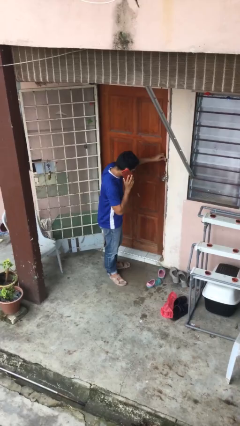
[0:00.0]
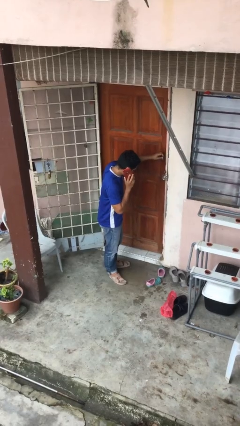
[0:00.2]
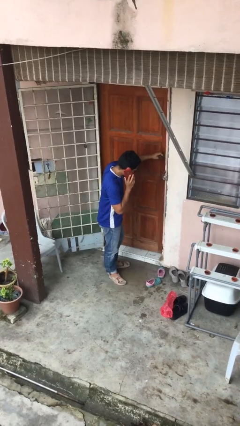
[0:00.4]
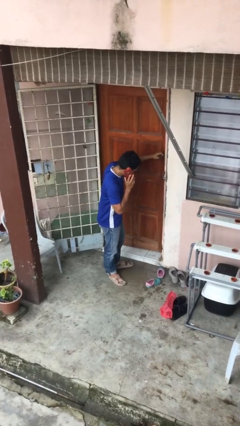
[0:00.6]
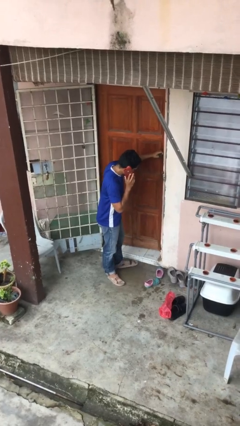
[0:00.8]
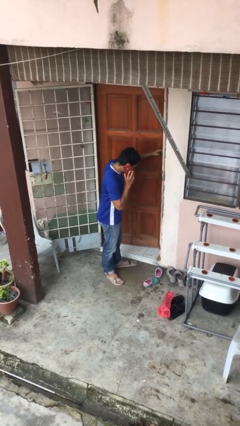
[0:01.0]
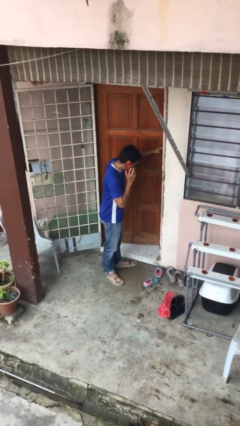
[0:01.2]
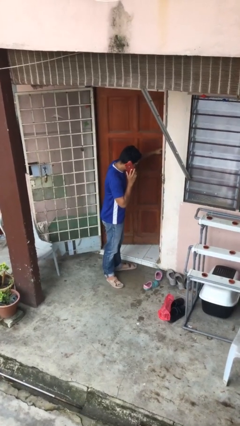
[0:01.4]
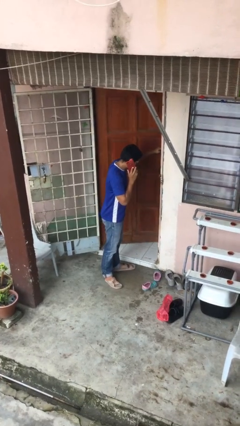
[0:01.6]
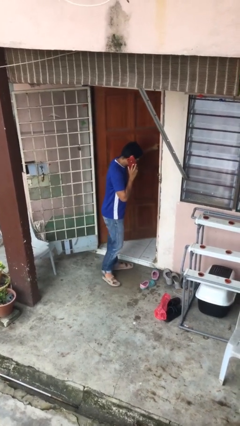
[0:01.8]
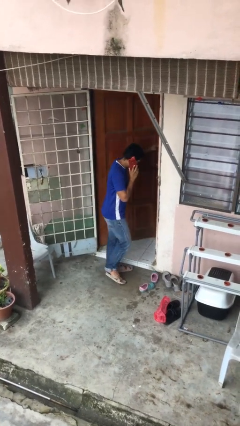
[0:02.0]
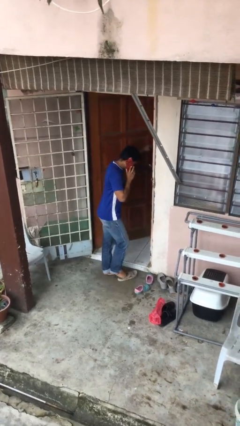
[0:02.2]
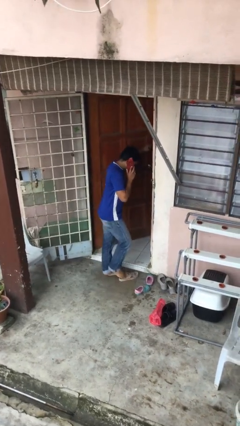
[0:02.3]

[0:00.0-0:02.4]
person opens facility door

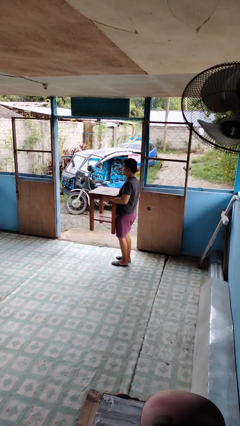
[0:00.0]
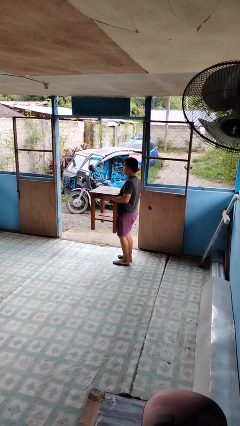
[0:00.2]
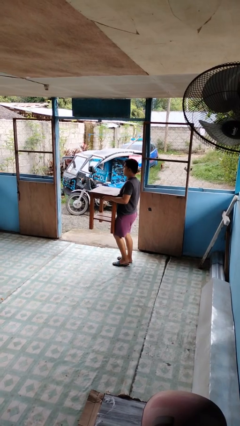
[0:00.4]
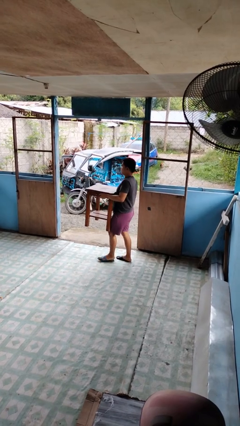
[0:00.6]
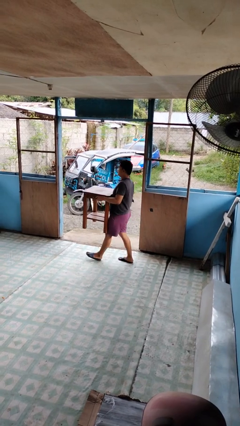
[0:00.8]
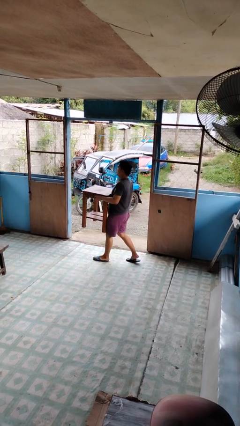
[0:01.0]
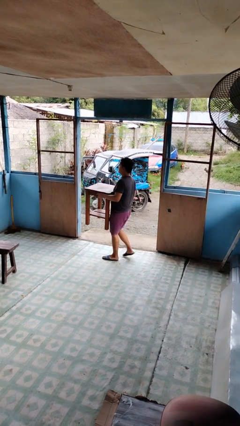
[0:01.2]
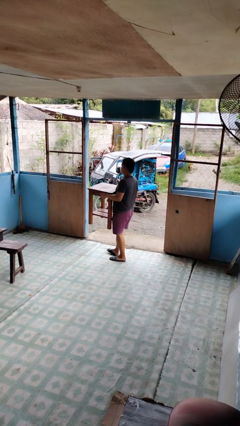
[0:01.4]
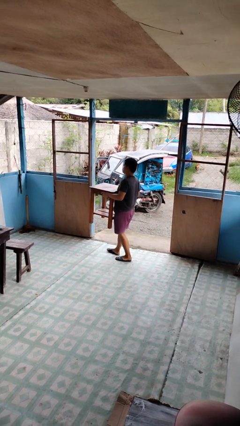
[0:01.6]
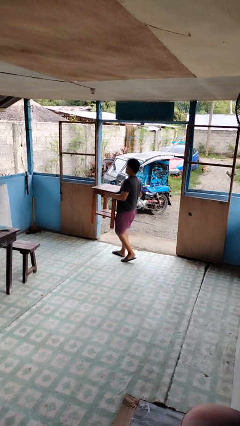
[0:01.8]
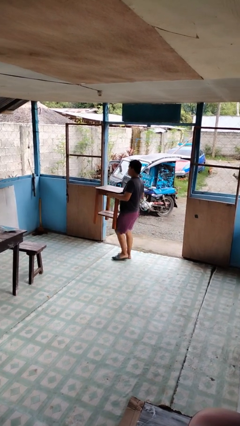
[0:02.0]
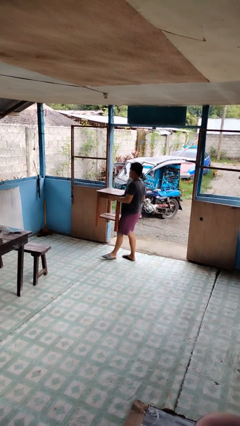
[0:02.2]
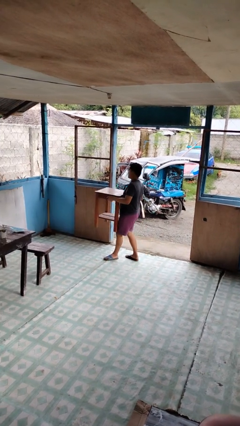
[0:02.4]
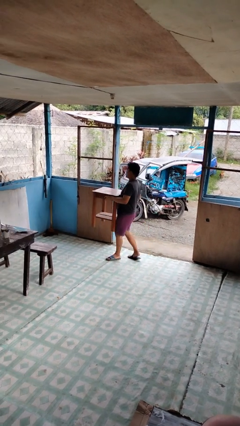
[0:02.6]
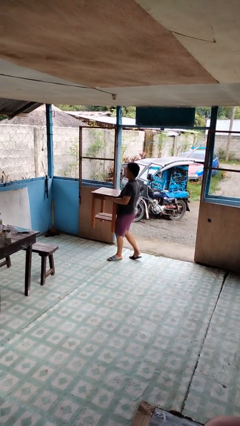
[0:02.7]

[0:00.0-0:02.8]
person carries furniture

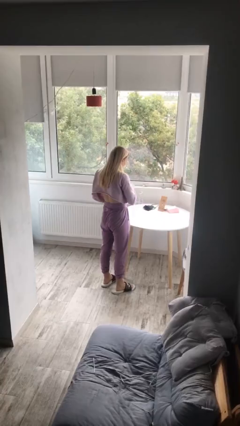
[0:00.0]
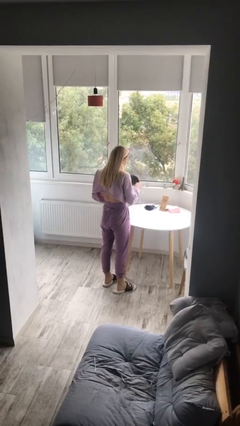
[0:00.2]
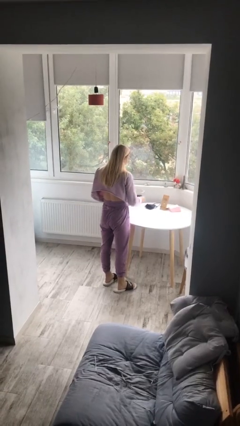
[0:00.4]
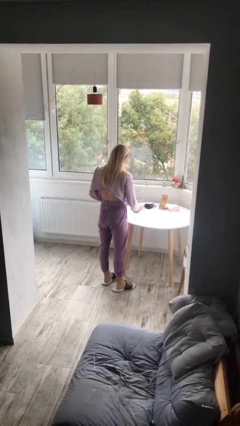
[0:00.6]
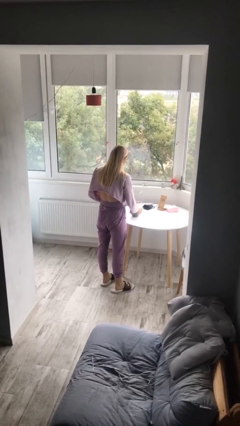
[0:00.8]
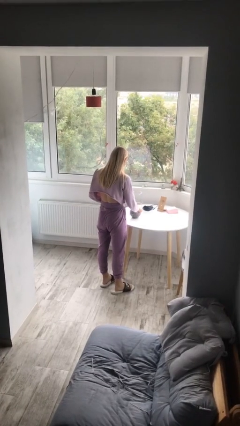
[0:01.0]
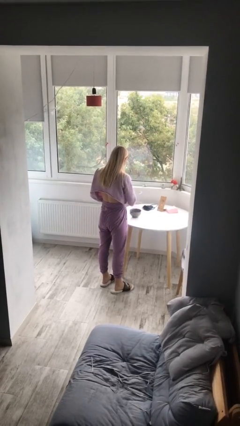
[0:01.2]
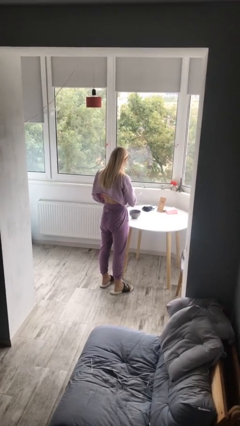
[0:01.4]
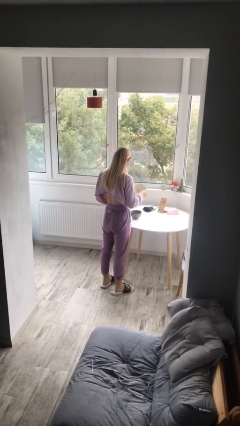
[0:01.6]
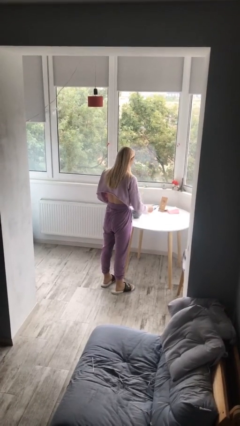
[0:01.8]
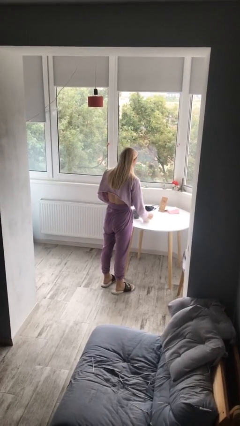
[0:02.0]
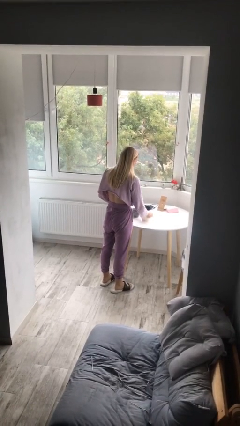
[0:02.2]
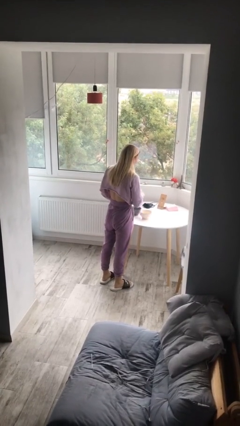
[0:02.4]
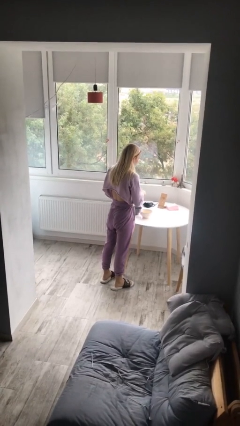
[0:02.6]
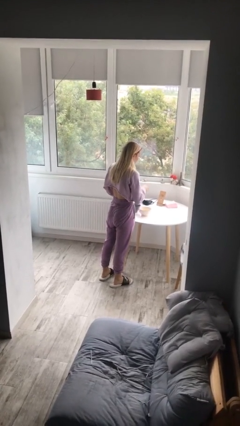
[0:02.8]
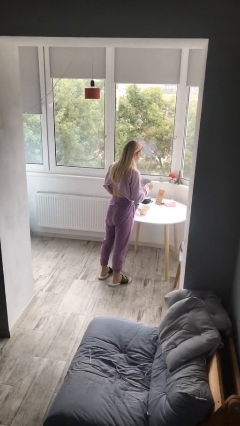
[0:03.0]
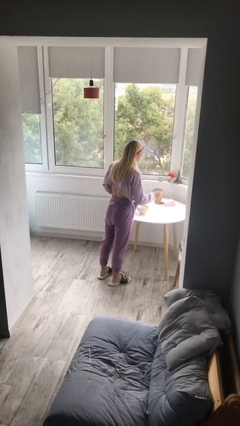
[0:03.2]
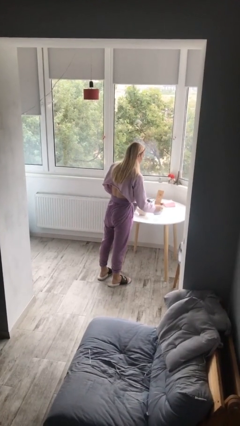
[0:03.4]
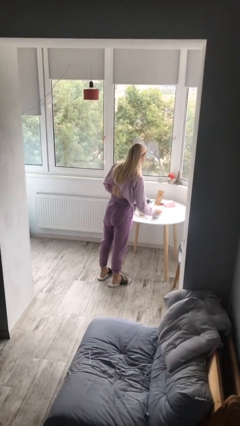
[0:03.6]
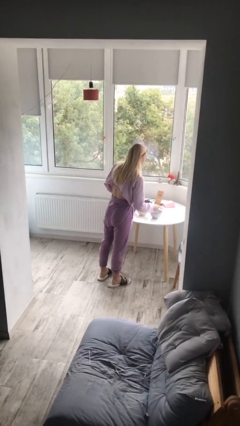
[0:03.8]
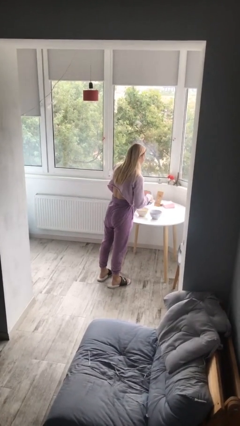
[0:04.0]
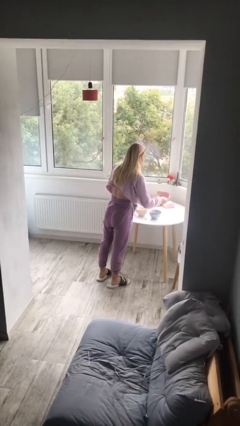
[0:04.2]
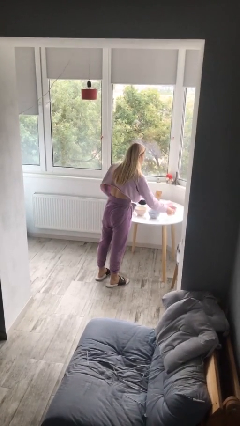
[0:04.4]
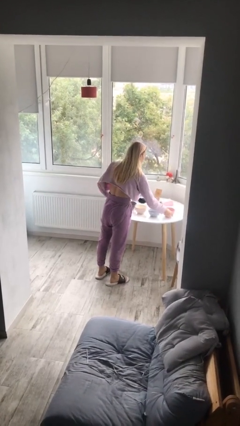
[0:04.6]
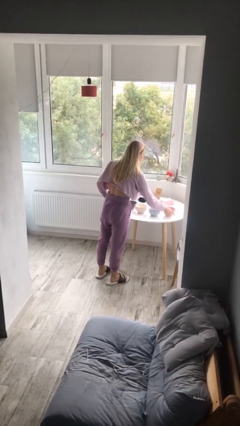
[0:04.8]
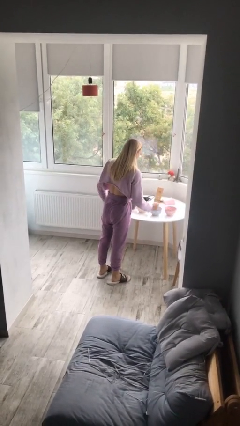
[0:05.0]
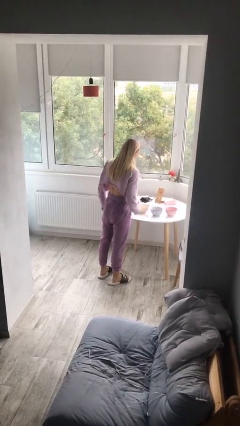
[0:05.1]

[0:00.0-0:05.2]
person sets table

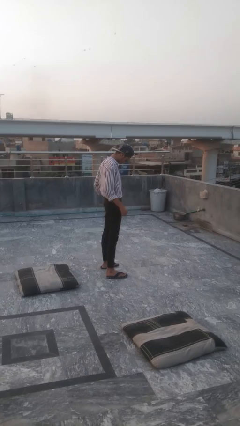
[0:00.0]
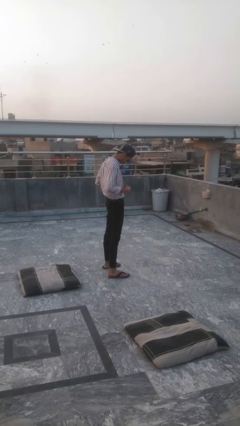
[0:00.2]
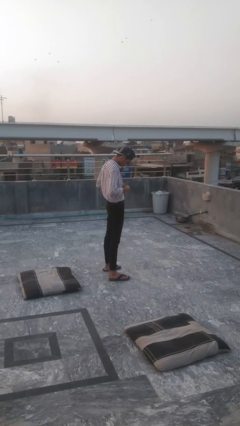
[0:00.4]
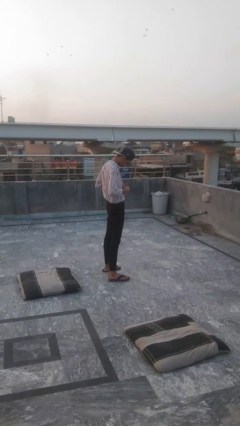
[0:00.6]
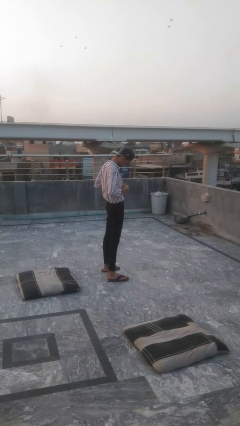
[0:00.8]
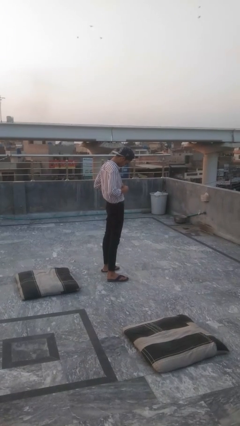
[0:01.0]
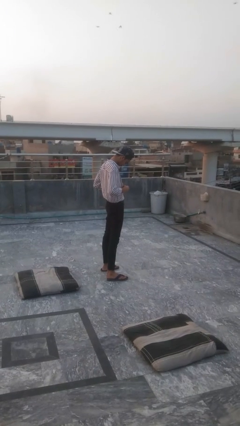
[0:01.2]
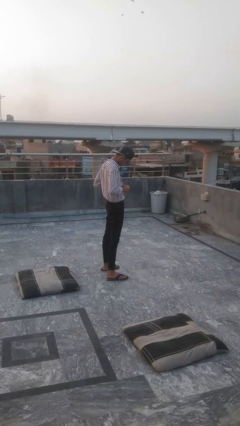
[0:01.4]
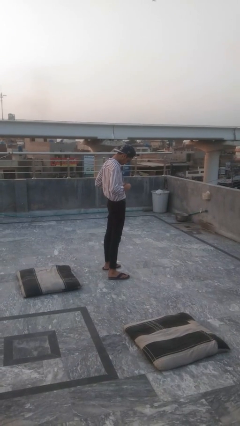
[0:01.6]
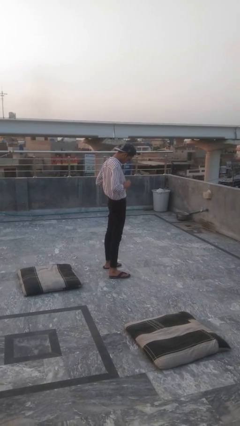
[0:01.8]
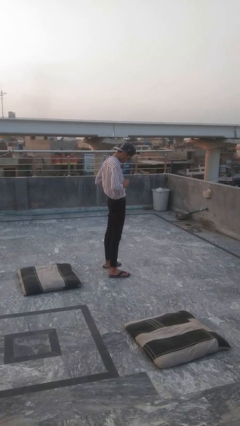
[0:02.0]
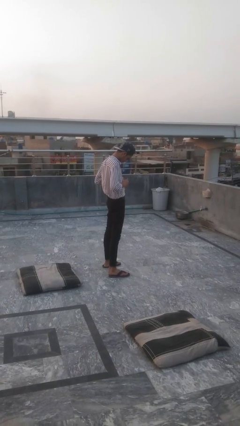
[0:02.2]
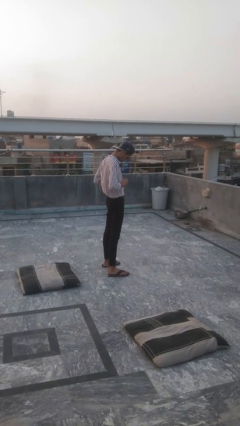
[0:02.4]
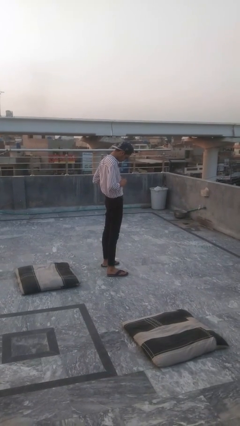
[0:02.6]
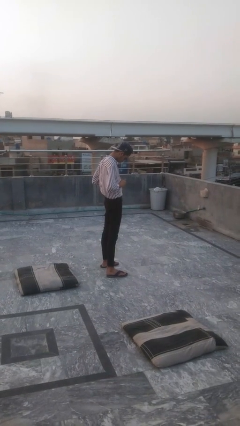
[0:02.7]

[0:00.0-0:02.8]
person buttons shirt

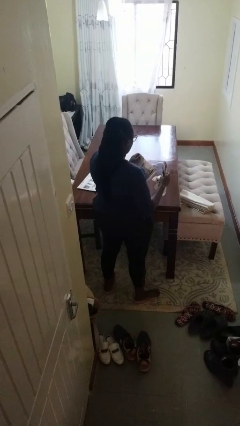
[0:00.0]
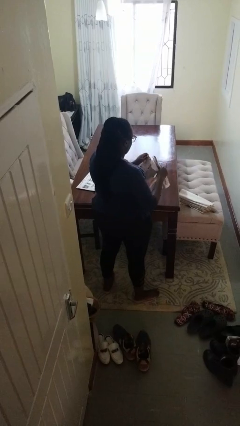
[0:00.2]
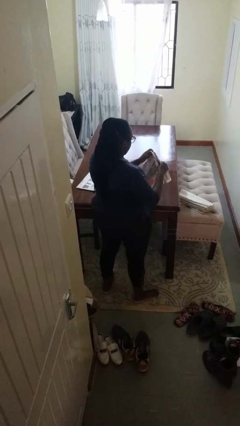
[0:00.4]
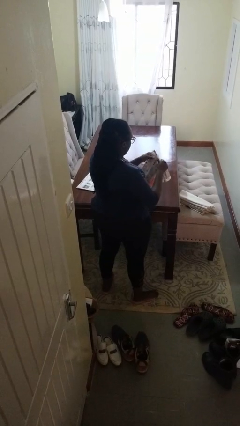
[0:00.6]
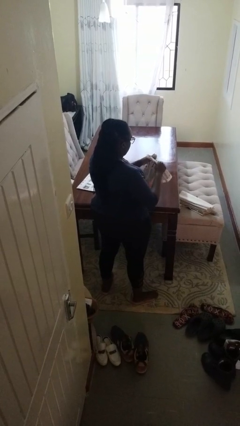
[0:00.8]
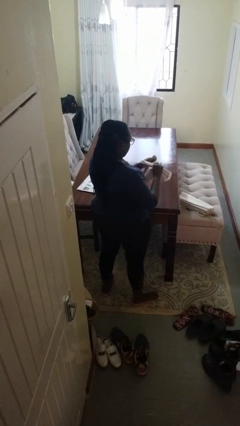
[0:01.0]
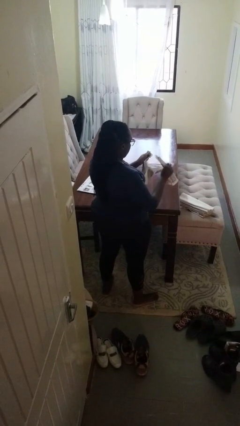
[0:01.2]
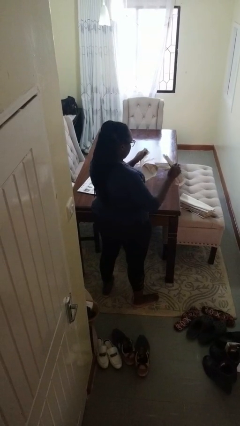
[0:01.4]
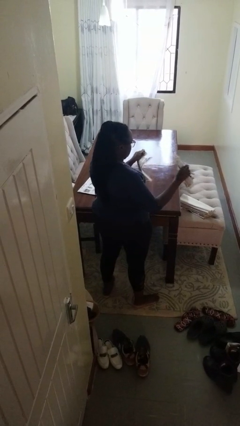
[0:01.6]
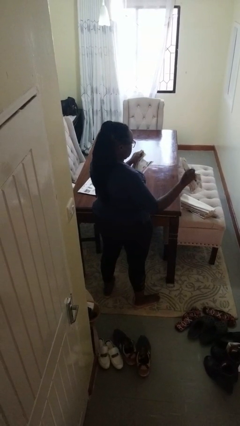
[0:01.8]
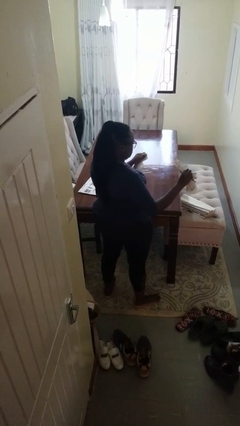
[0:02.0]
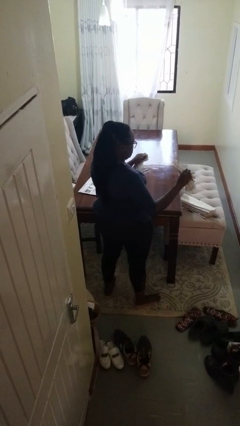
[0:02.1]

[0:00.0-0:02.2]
person tears paper

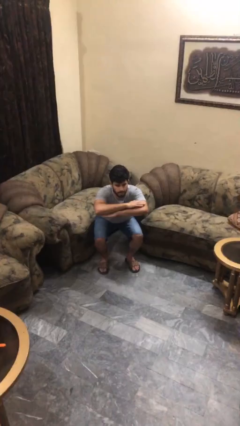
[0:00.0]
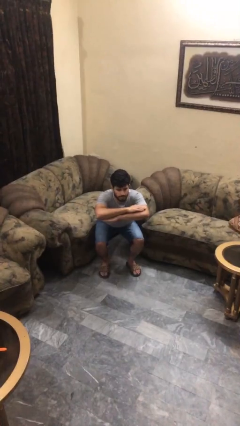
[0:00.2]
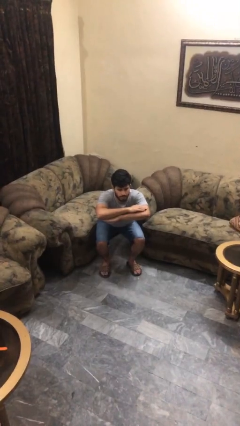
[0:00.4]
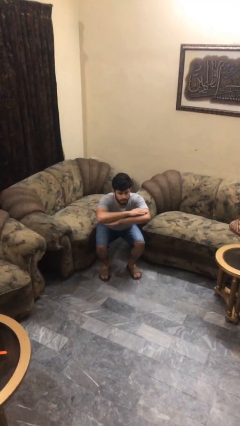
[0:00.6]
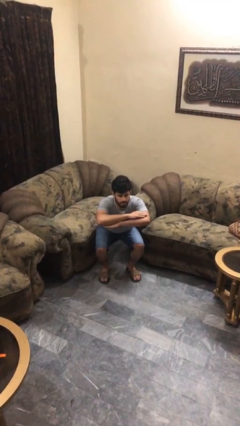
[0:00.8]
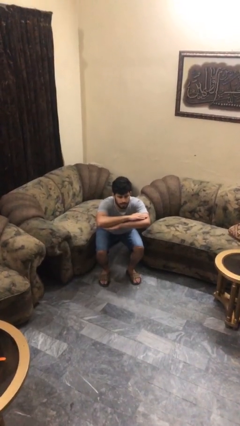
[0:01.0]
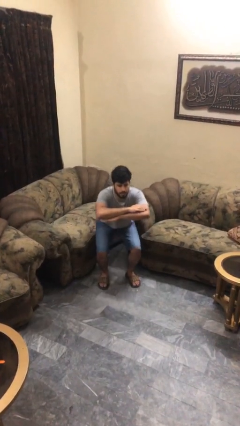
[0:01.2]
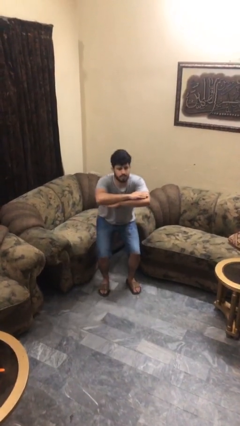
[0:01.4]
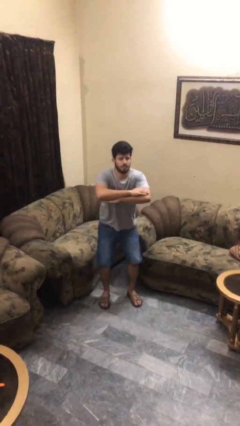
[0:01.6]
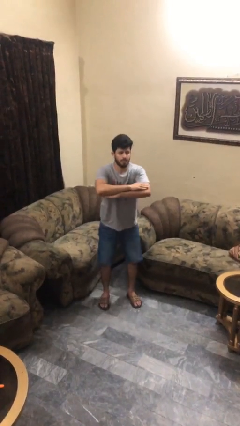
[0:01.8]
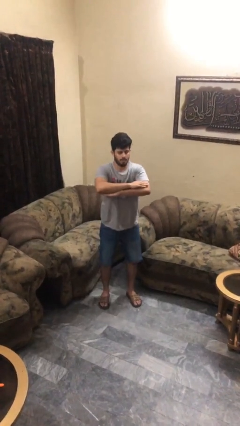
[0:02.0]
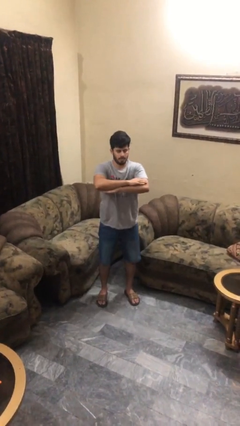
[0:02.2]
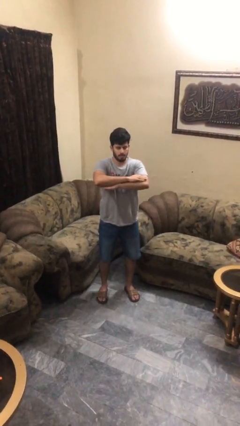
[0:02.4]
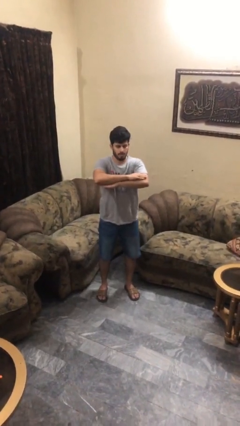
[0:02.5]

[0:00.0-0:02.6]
person stands up
